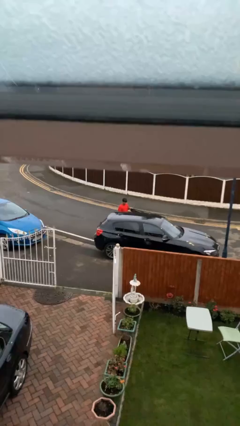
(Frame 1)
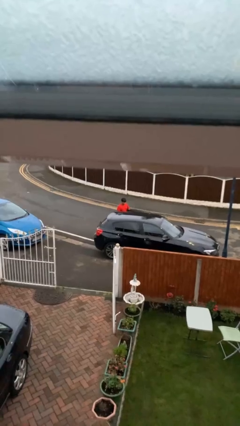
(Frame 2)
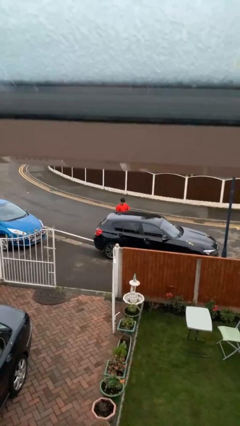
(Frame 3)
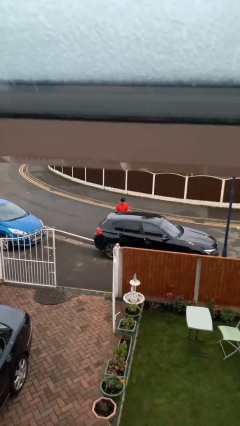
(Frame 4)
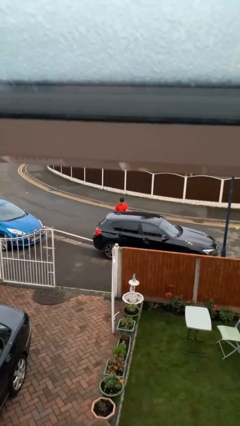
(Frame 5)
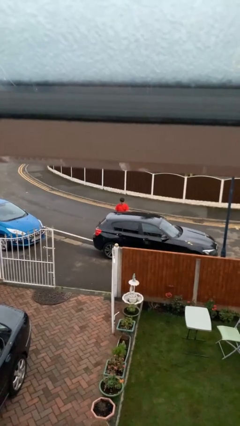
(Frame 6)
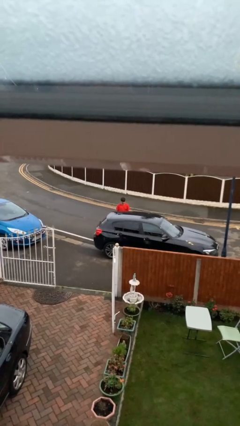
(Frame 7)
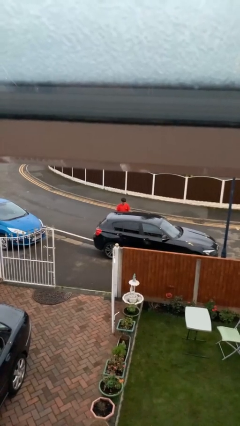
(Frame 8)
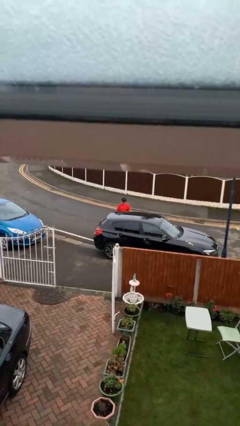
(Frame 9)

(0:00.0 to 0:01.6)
person closes car door

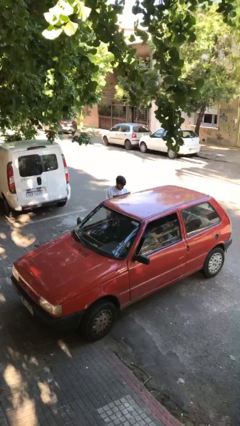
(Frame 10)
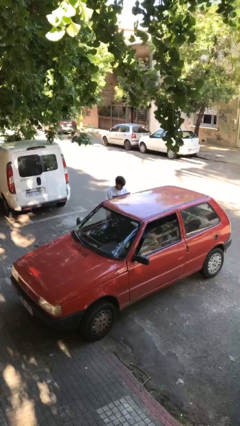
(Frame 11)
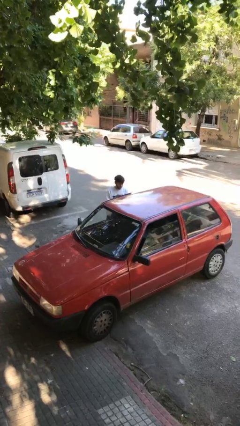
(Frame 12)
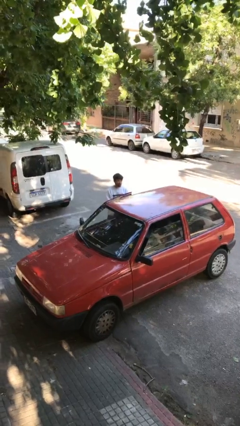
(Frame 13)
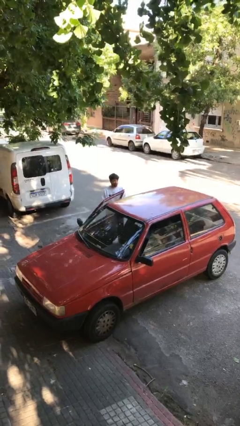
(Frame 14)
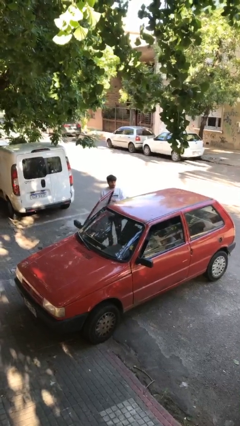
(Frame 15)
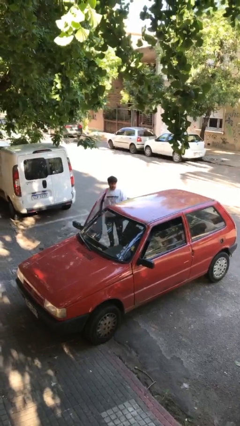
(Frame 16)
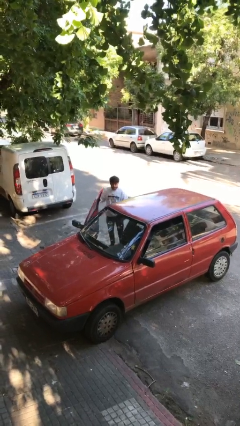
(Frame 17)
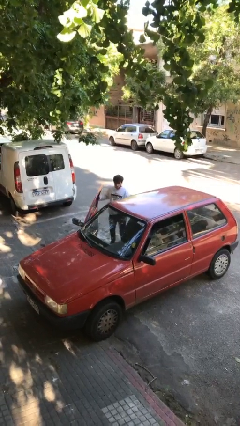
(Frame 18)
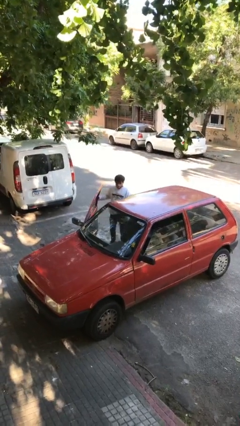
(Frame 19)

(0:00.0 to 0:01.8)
person opens car door

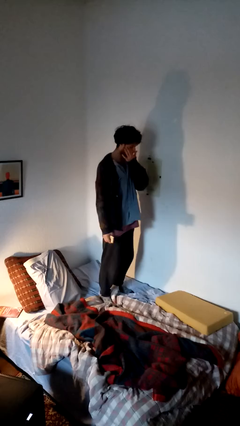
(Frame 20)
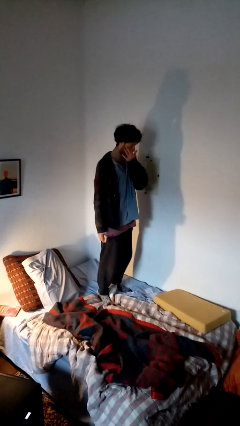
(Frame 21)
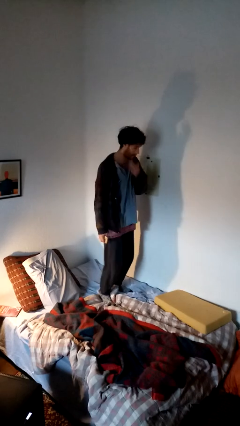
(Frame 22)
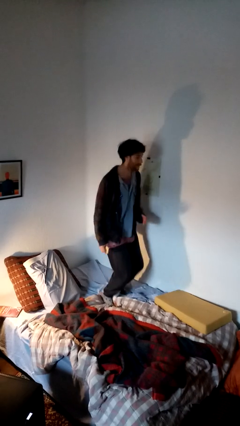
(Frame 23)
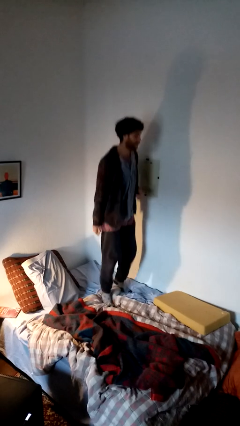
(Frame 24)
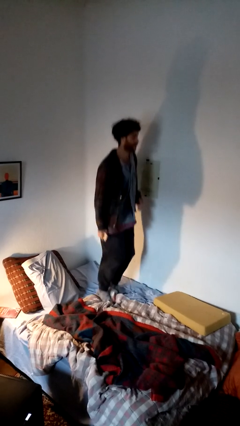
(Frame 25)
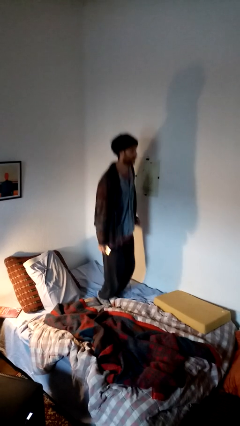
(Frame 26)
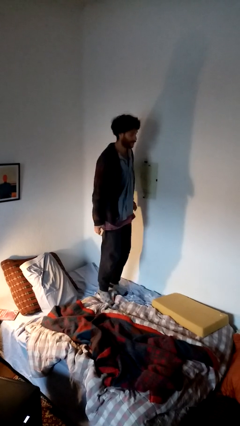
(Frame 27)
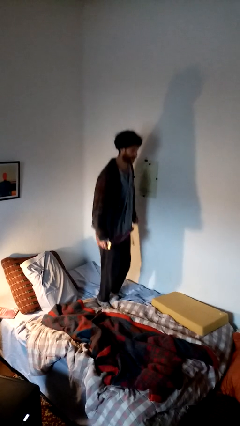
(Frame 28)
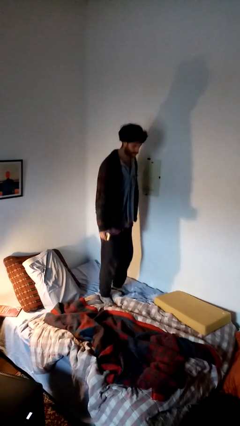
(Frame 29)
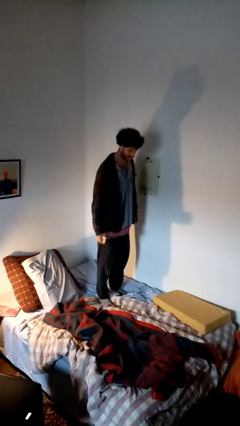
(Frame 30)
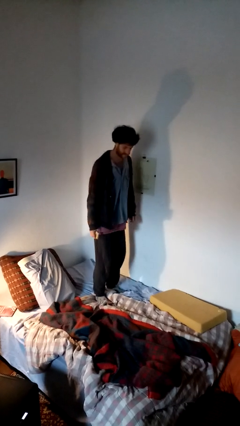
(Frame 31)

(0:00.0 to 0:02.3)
person jumps on bed

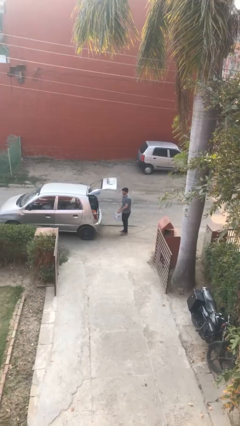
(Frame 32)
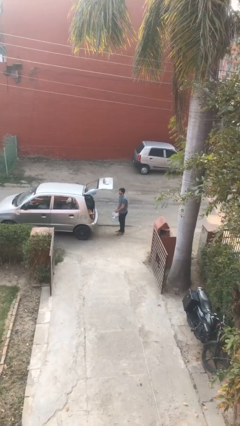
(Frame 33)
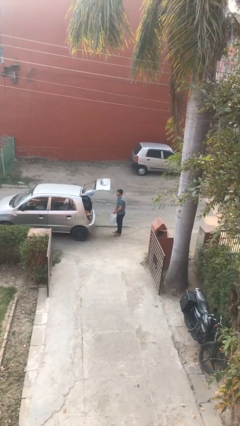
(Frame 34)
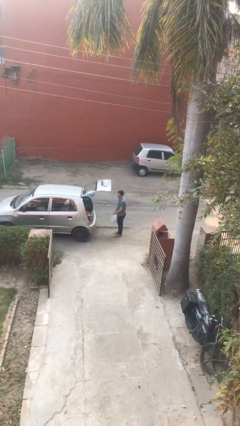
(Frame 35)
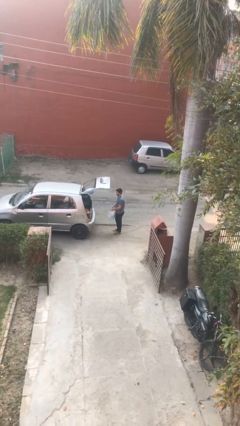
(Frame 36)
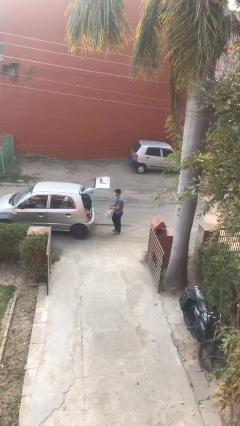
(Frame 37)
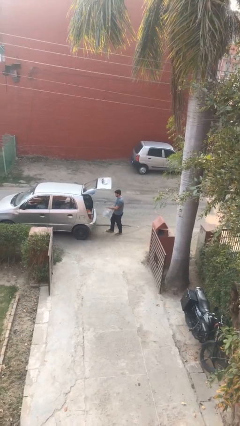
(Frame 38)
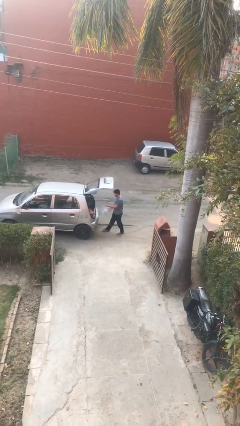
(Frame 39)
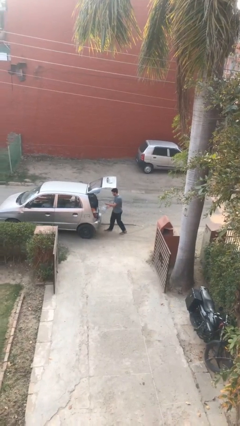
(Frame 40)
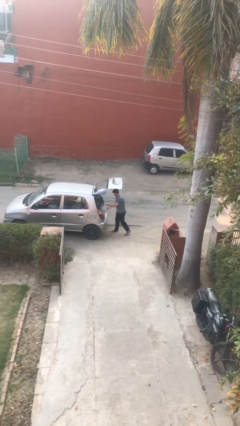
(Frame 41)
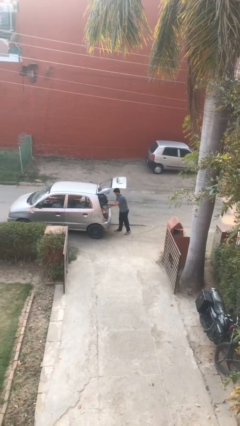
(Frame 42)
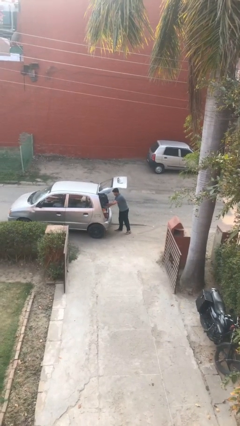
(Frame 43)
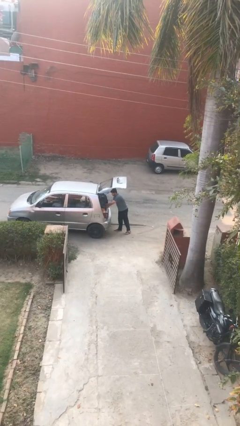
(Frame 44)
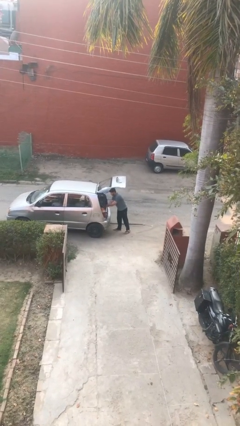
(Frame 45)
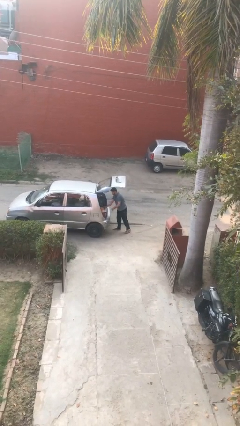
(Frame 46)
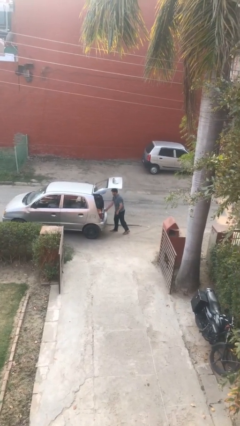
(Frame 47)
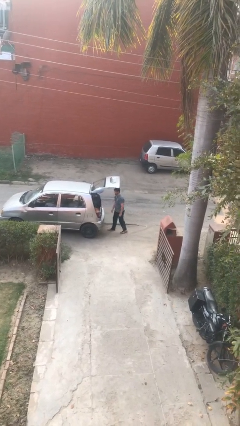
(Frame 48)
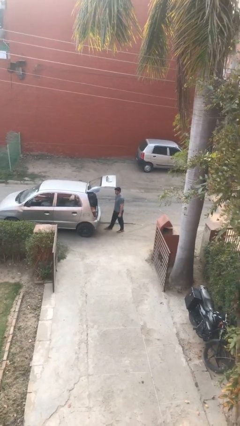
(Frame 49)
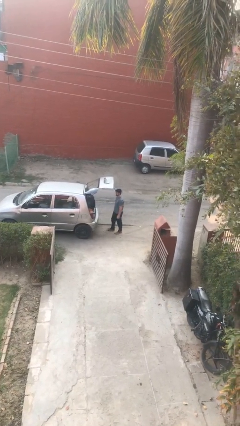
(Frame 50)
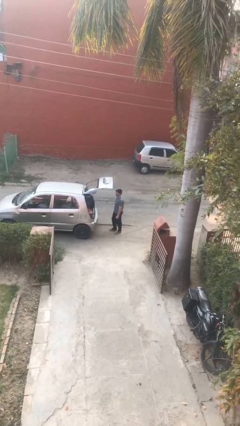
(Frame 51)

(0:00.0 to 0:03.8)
person loads car

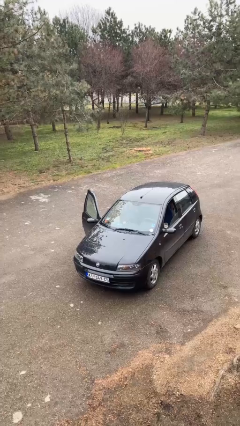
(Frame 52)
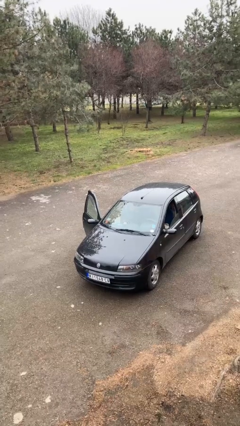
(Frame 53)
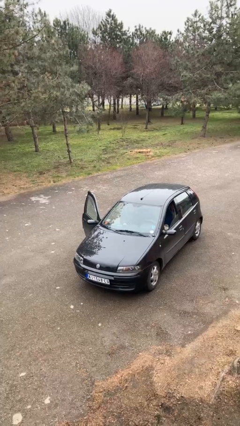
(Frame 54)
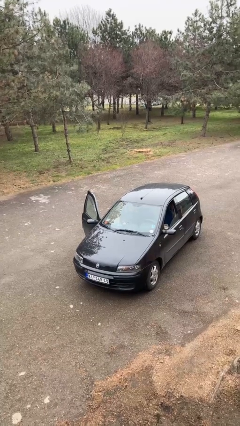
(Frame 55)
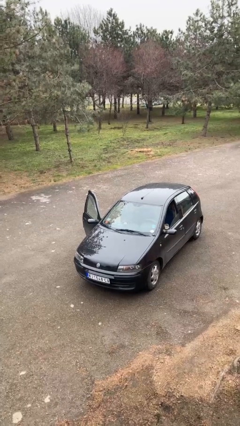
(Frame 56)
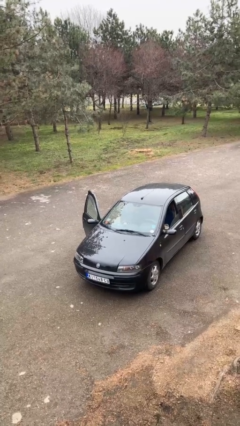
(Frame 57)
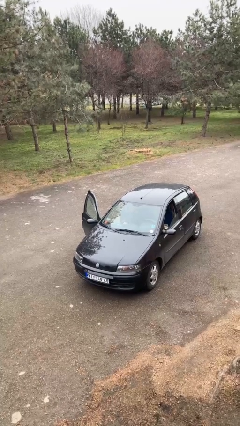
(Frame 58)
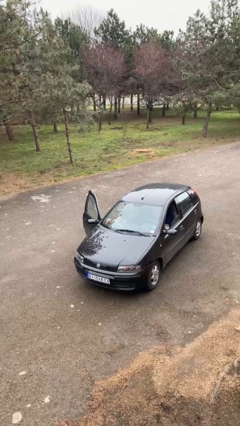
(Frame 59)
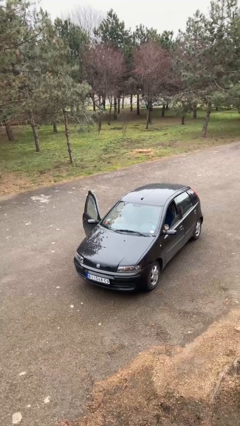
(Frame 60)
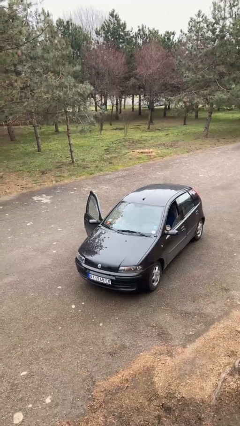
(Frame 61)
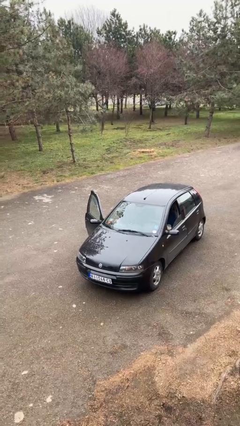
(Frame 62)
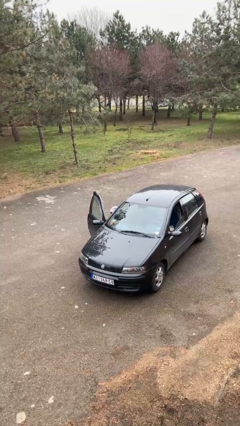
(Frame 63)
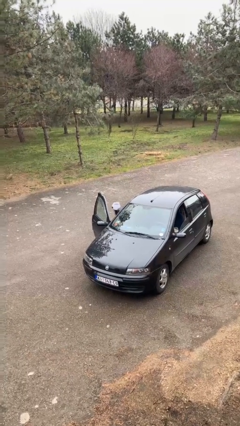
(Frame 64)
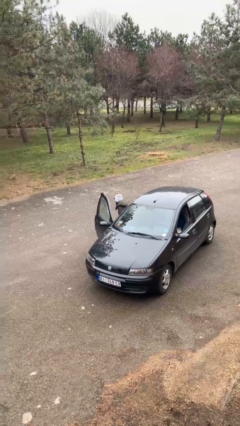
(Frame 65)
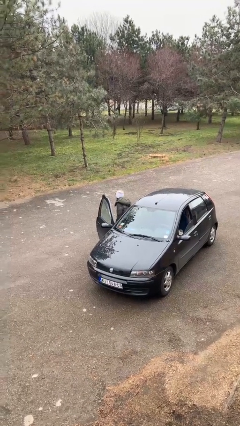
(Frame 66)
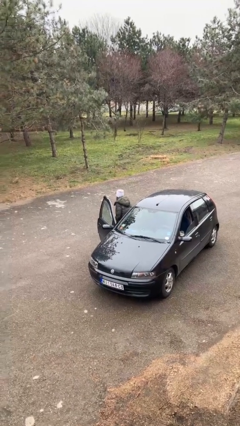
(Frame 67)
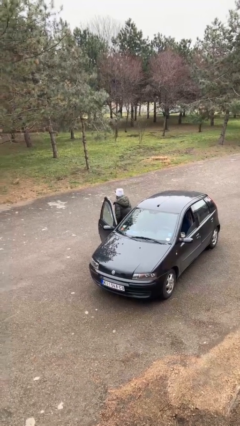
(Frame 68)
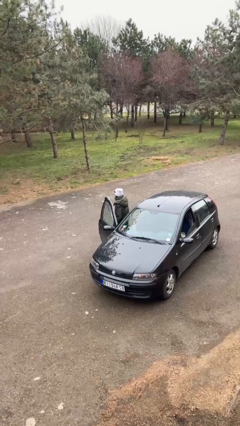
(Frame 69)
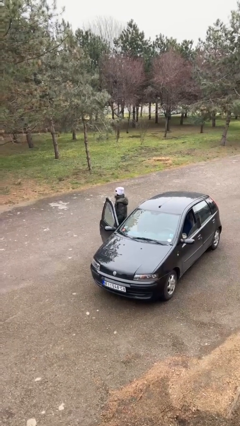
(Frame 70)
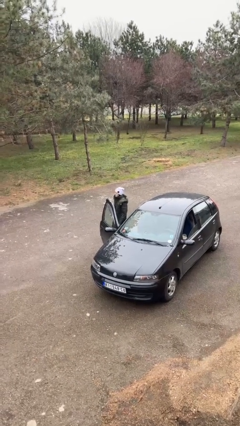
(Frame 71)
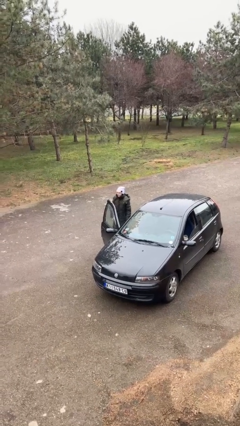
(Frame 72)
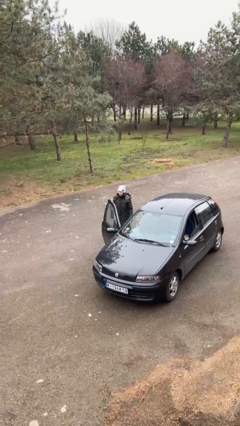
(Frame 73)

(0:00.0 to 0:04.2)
person exits car

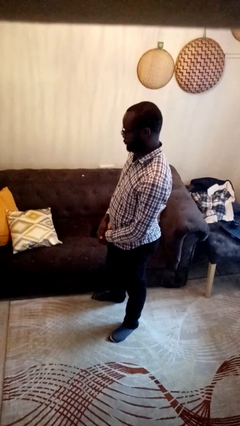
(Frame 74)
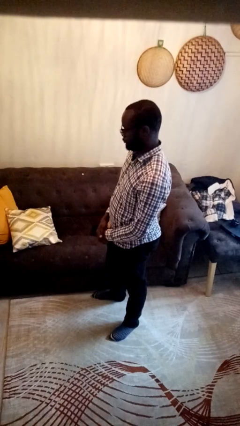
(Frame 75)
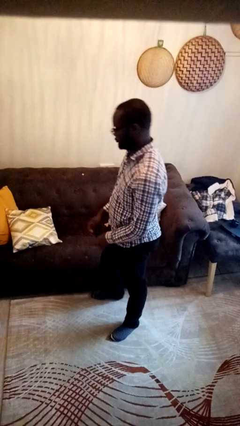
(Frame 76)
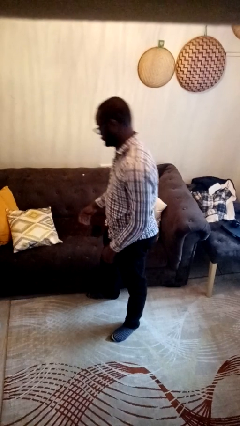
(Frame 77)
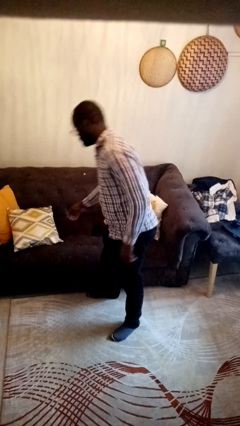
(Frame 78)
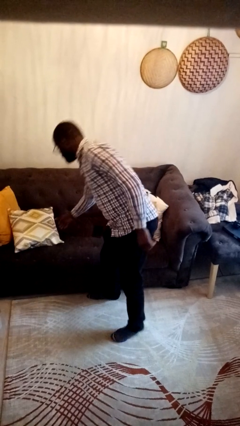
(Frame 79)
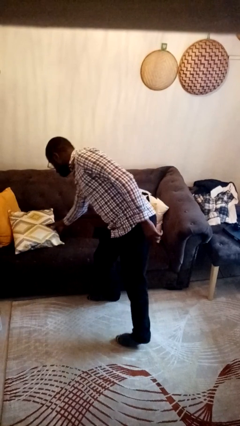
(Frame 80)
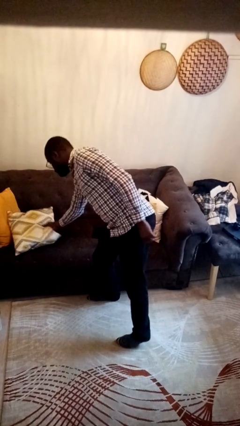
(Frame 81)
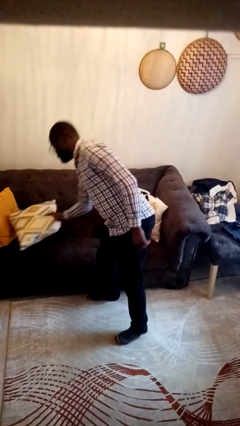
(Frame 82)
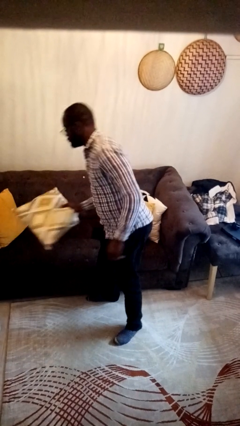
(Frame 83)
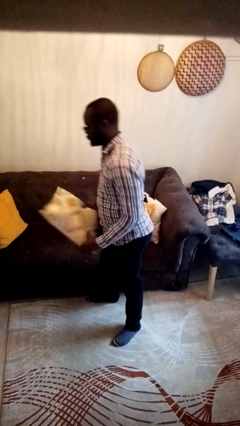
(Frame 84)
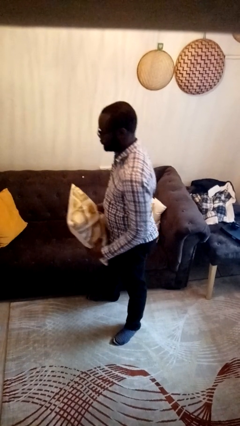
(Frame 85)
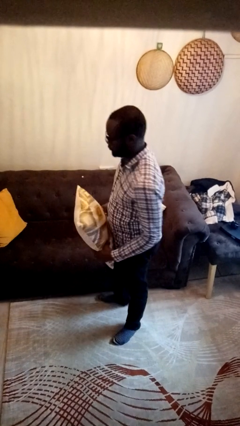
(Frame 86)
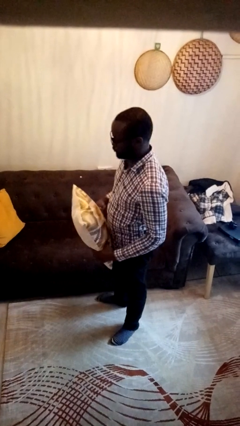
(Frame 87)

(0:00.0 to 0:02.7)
person picks up object from couch

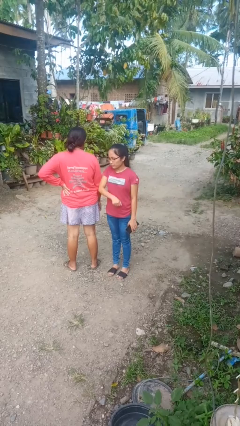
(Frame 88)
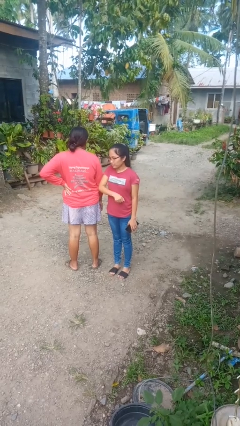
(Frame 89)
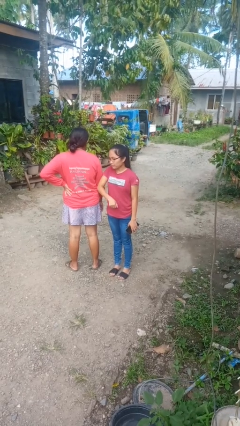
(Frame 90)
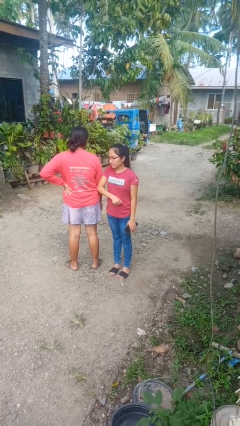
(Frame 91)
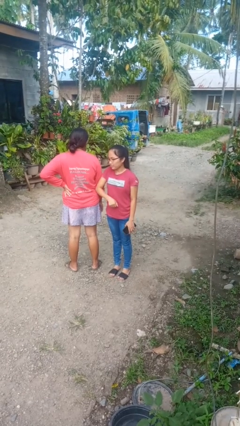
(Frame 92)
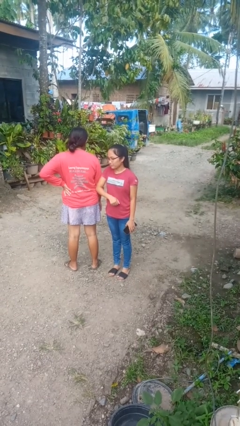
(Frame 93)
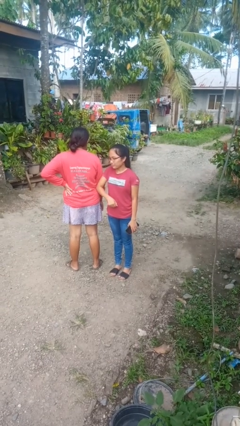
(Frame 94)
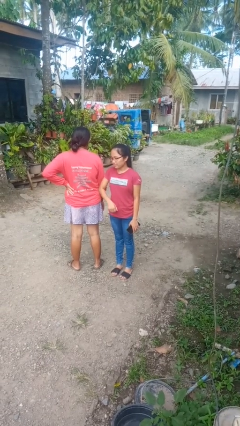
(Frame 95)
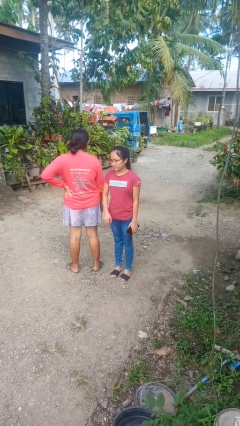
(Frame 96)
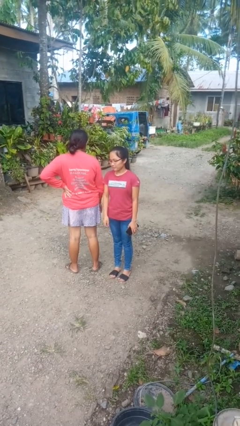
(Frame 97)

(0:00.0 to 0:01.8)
person nudges person with elbow
